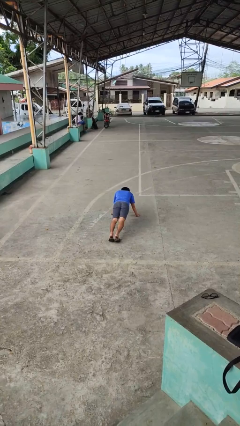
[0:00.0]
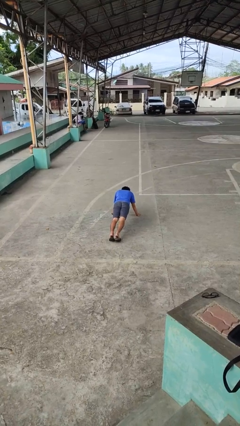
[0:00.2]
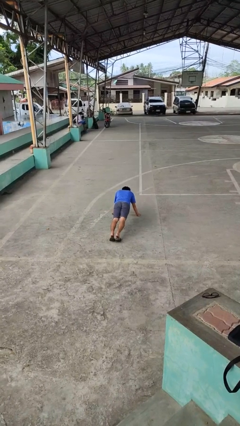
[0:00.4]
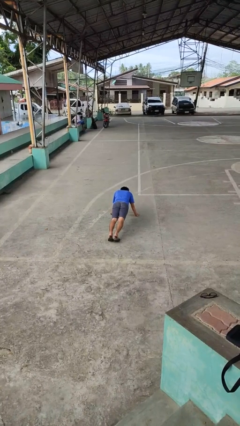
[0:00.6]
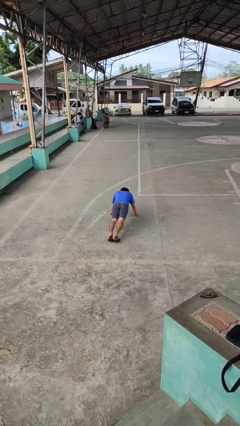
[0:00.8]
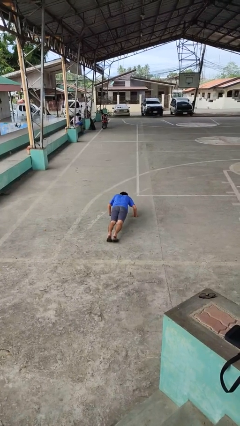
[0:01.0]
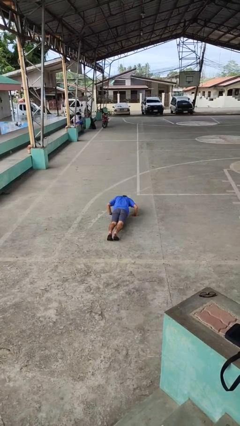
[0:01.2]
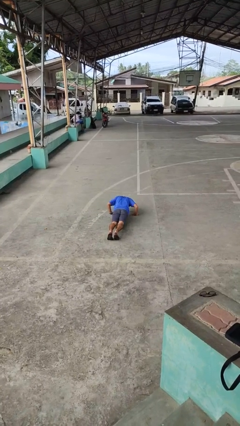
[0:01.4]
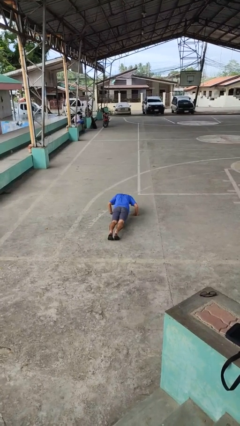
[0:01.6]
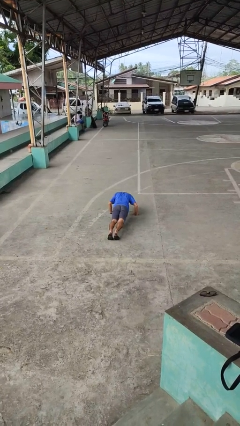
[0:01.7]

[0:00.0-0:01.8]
person exercises with pushup

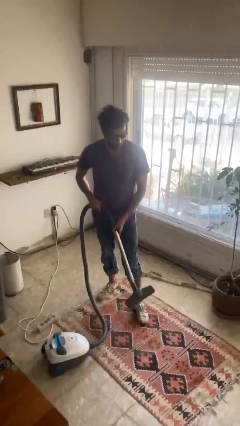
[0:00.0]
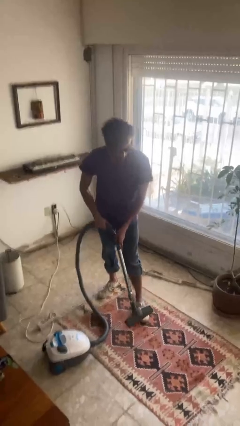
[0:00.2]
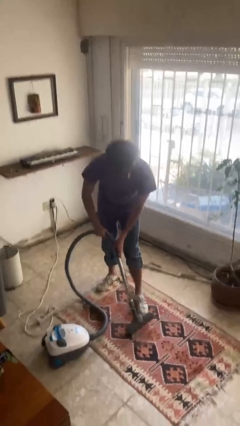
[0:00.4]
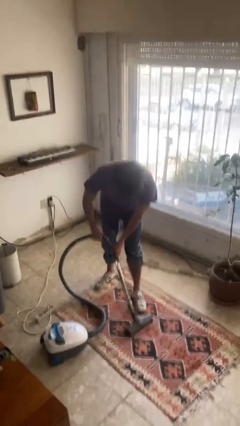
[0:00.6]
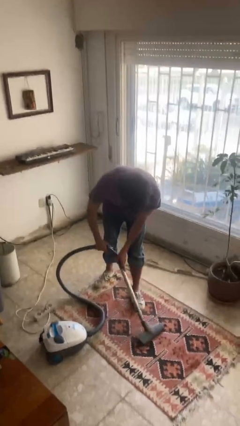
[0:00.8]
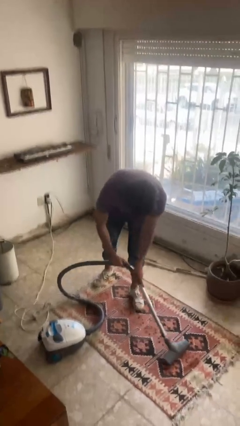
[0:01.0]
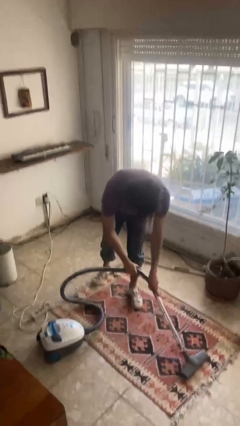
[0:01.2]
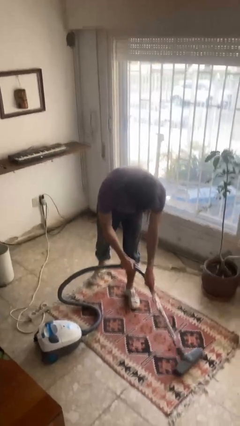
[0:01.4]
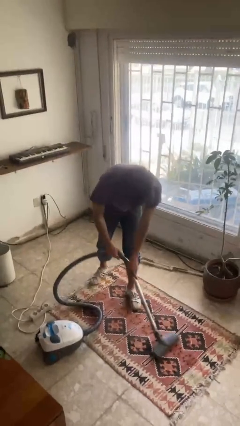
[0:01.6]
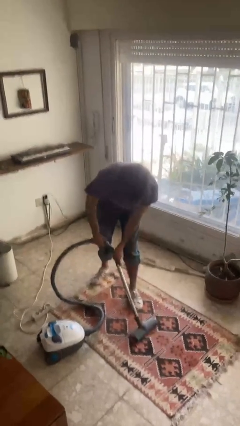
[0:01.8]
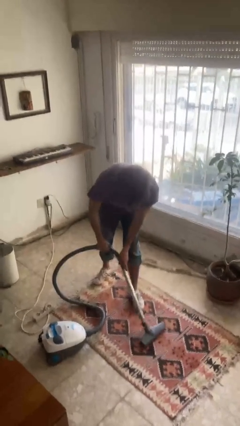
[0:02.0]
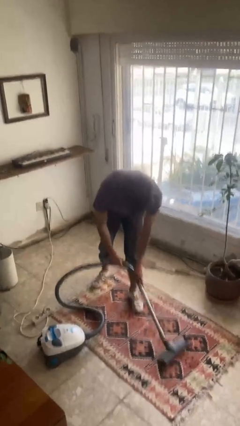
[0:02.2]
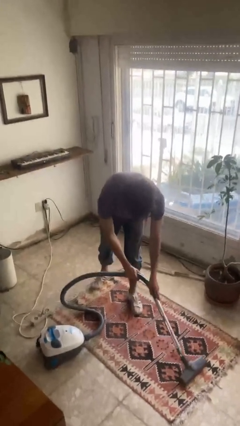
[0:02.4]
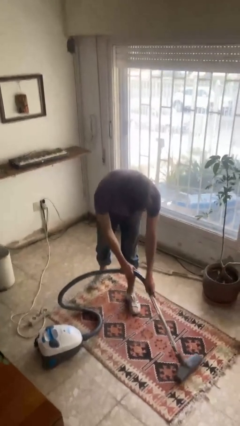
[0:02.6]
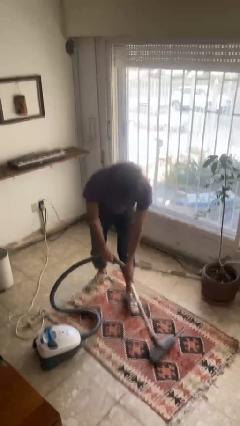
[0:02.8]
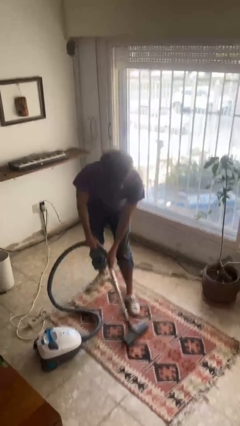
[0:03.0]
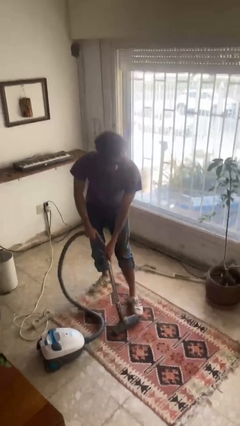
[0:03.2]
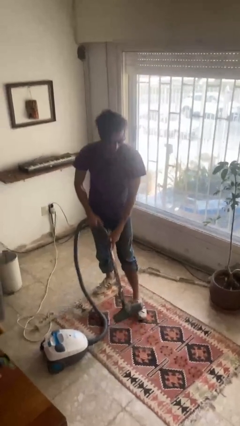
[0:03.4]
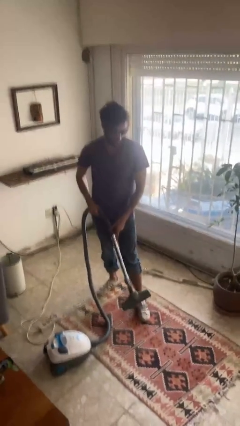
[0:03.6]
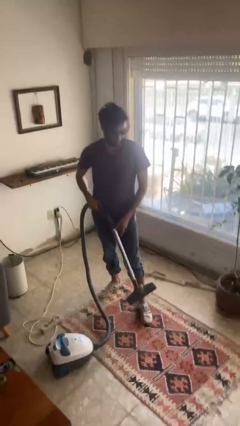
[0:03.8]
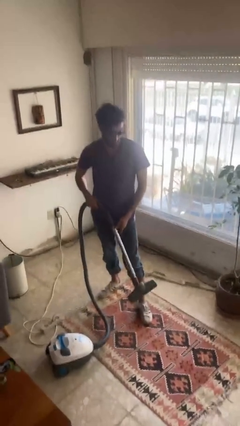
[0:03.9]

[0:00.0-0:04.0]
person vacuums carpet

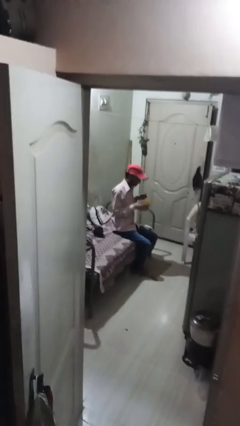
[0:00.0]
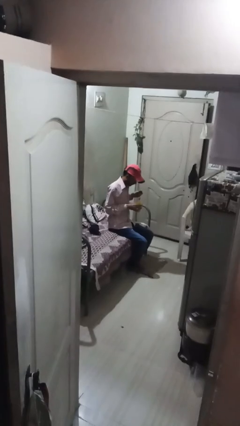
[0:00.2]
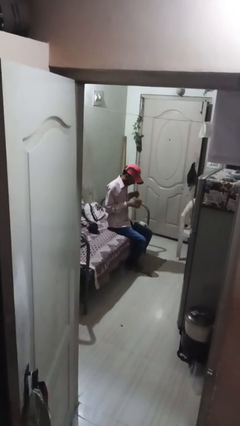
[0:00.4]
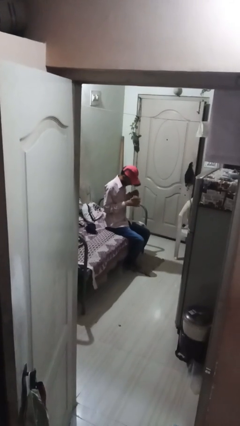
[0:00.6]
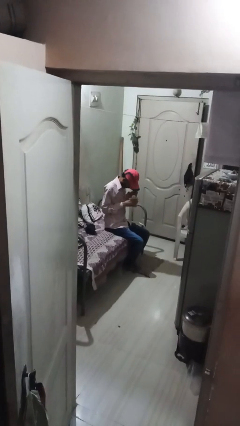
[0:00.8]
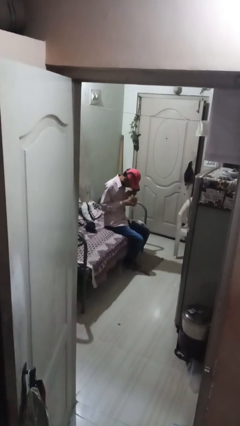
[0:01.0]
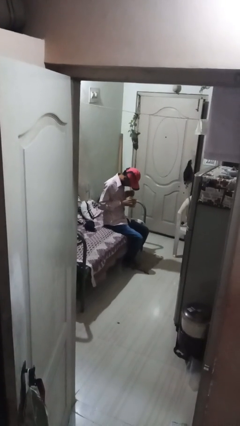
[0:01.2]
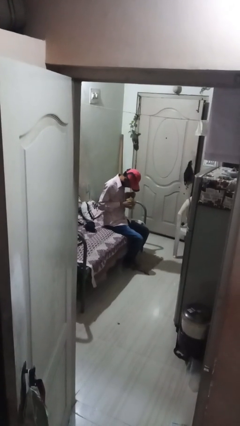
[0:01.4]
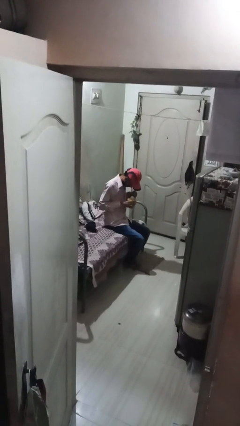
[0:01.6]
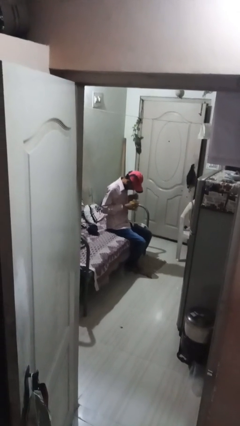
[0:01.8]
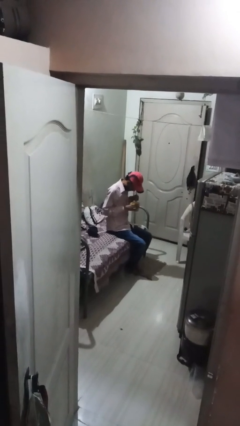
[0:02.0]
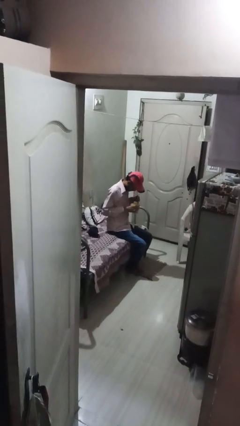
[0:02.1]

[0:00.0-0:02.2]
person stirs mug

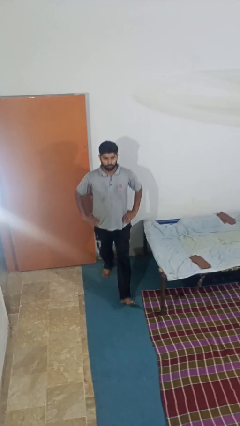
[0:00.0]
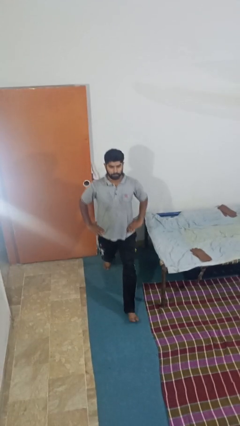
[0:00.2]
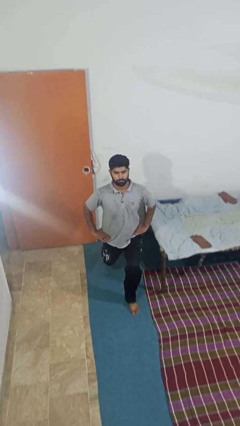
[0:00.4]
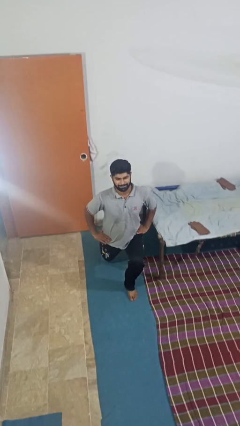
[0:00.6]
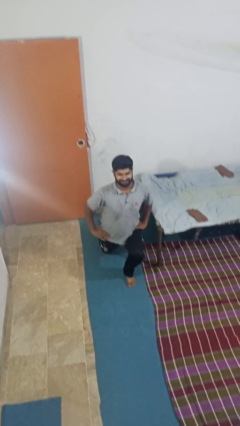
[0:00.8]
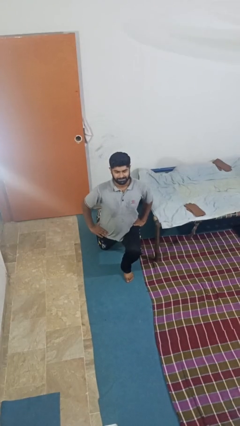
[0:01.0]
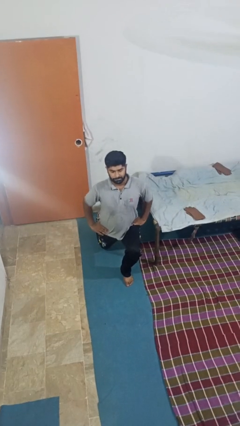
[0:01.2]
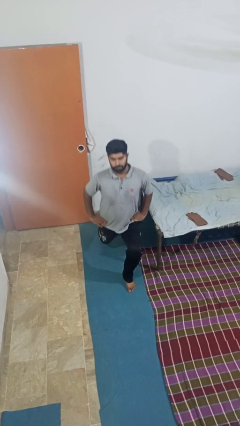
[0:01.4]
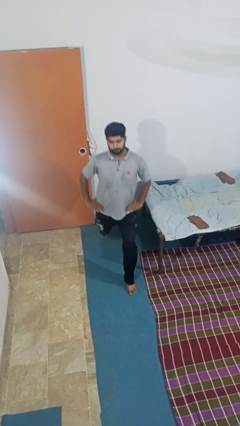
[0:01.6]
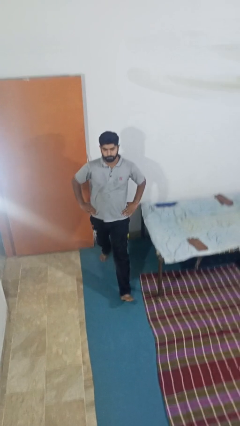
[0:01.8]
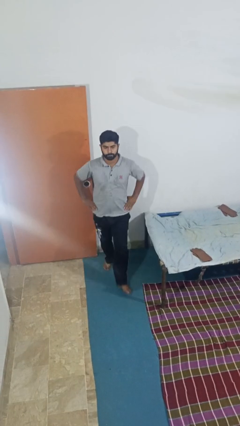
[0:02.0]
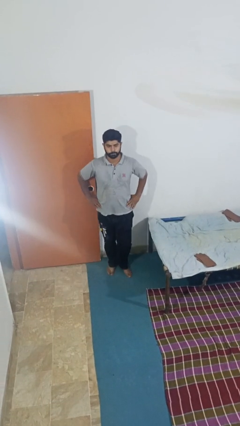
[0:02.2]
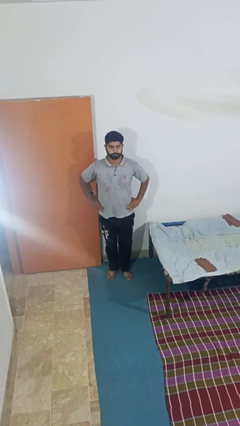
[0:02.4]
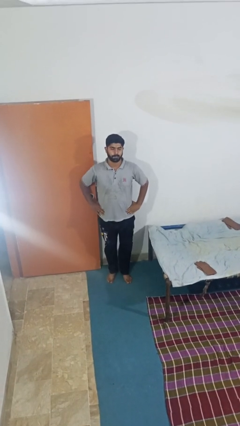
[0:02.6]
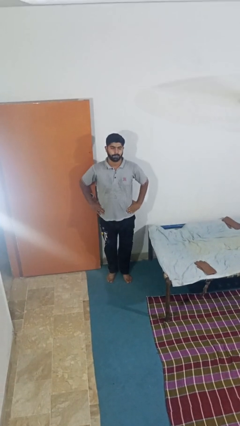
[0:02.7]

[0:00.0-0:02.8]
person exercises with lunges

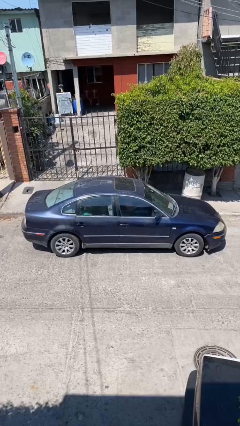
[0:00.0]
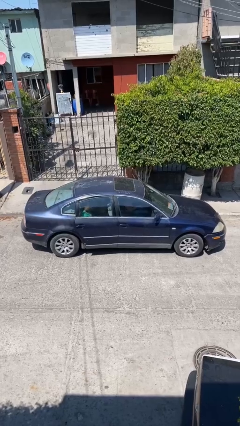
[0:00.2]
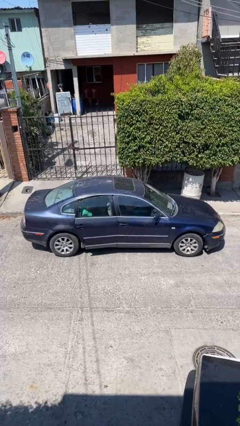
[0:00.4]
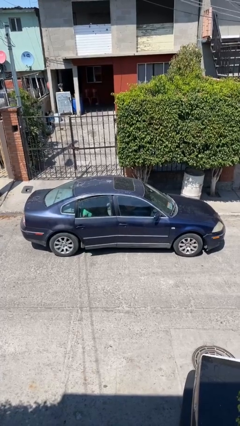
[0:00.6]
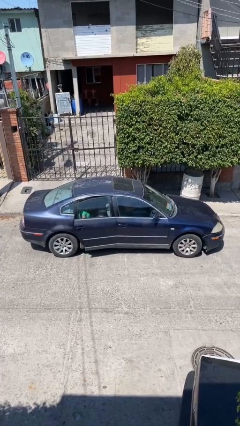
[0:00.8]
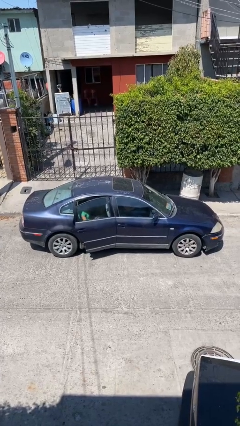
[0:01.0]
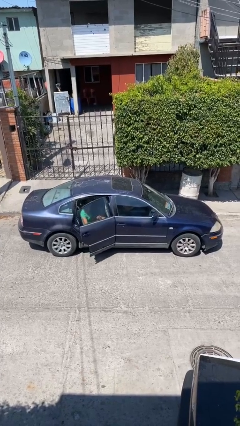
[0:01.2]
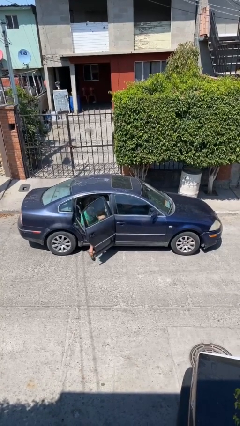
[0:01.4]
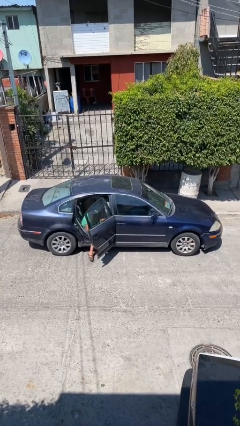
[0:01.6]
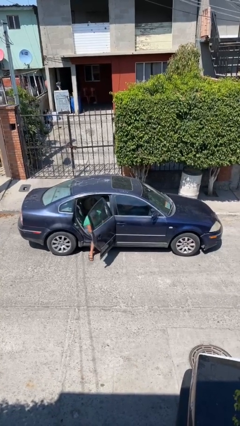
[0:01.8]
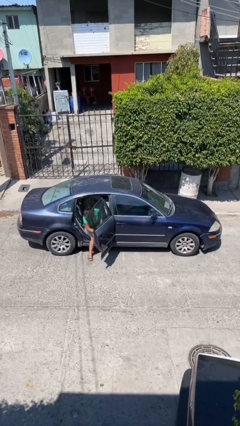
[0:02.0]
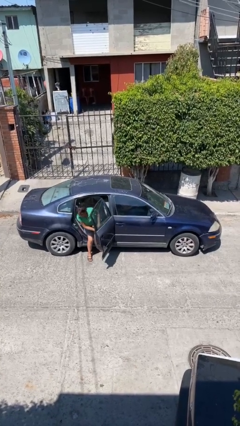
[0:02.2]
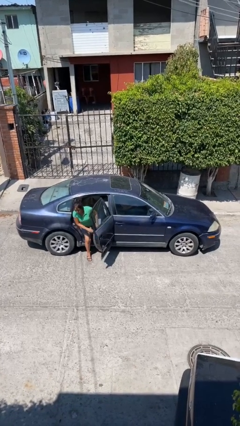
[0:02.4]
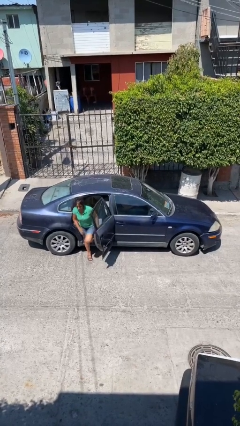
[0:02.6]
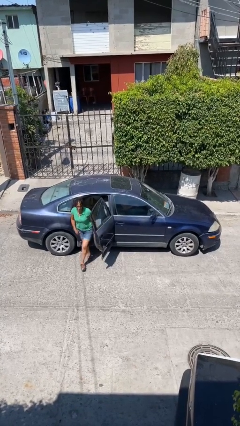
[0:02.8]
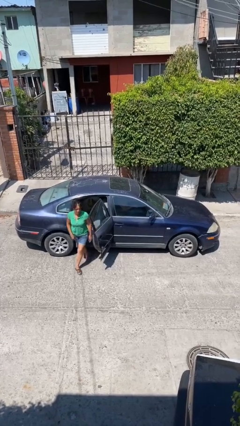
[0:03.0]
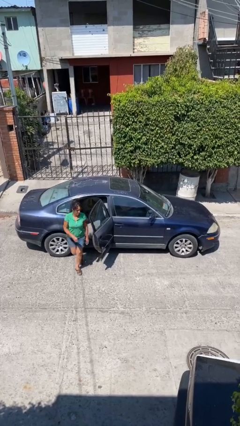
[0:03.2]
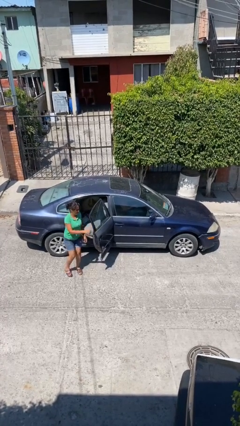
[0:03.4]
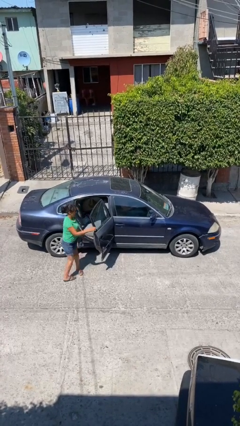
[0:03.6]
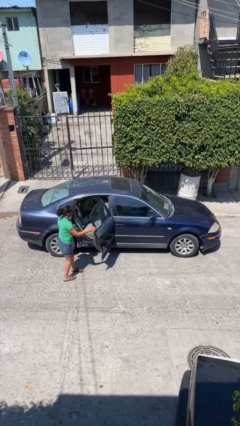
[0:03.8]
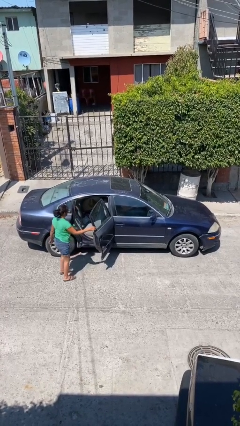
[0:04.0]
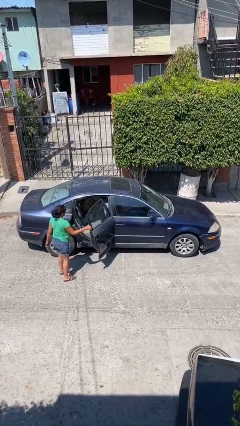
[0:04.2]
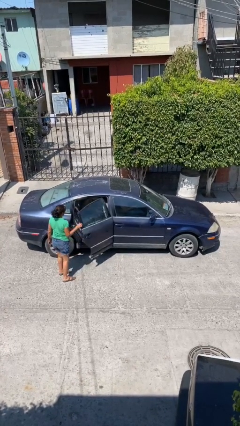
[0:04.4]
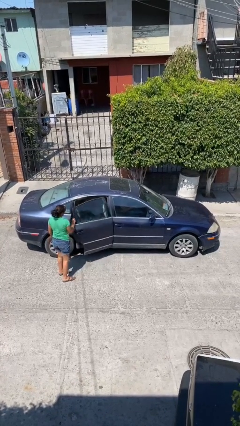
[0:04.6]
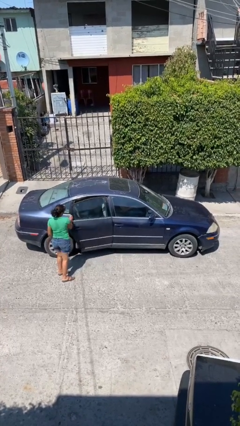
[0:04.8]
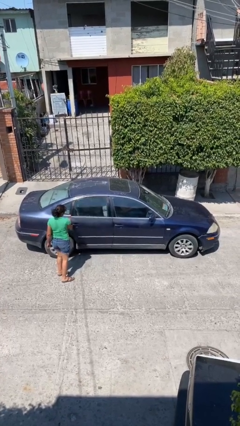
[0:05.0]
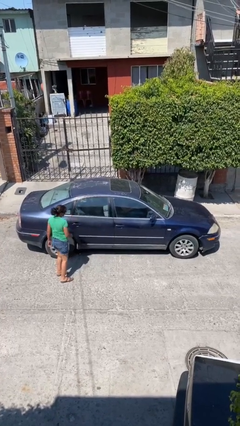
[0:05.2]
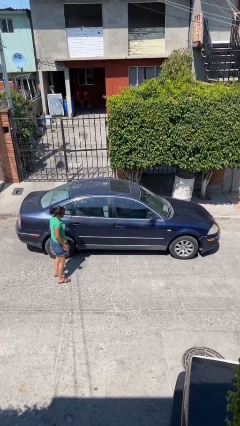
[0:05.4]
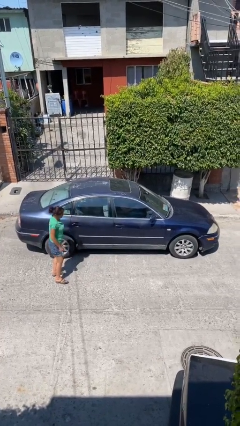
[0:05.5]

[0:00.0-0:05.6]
car drops off person

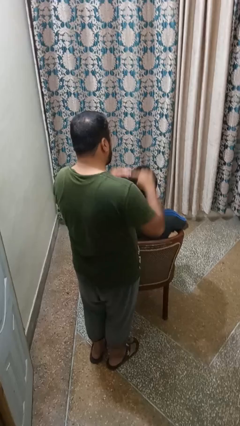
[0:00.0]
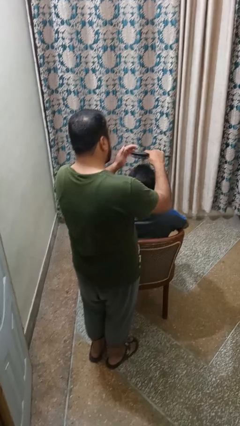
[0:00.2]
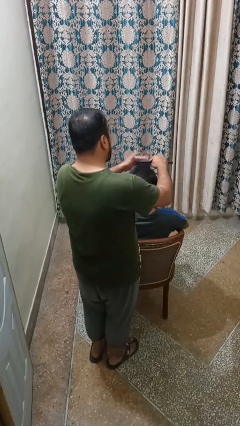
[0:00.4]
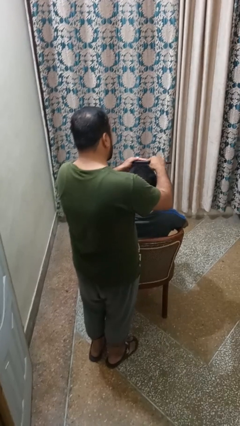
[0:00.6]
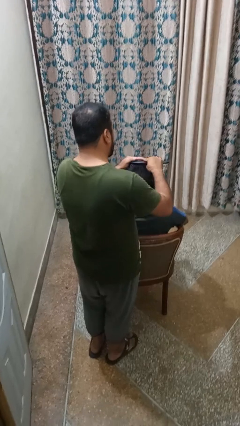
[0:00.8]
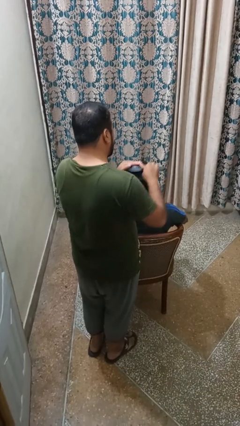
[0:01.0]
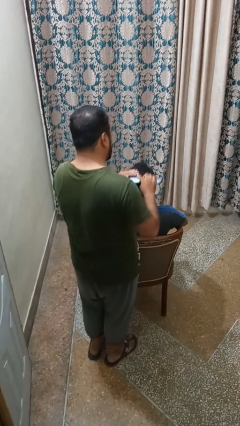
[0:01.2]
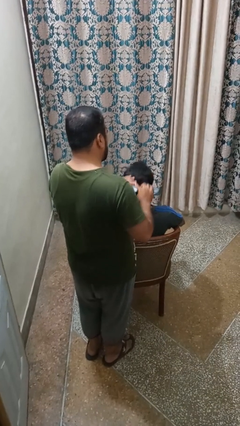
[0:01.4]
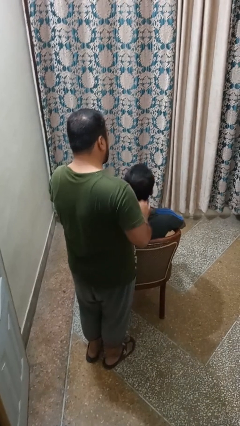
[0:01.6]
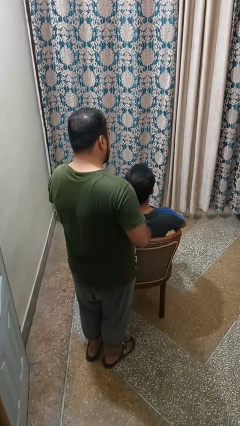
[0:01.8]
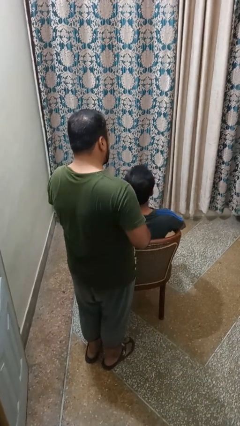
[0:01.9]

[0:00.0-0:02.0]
person brushes hair of person
